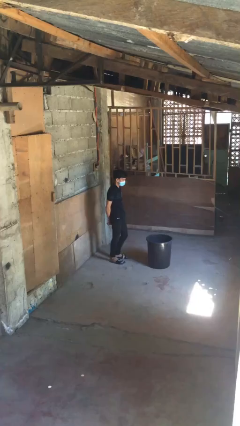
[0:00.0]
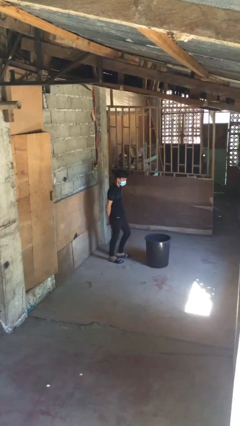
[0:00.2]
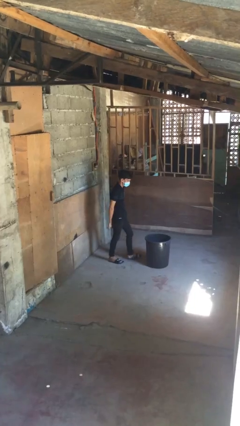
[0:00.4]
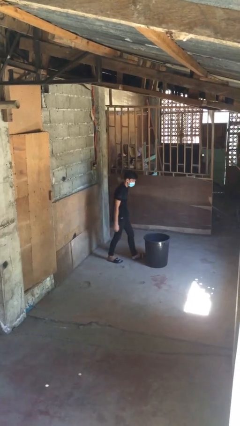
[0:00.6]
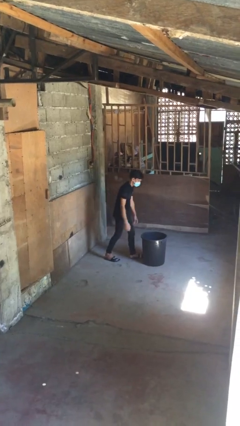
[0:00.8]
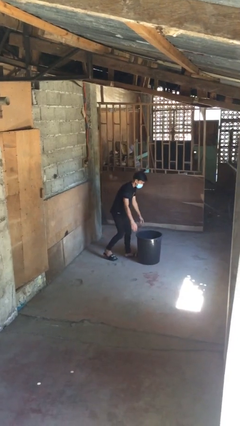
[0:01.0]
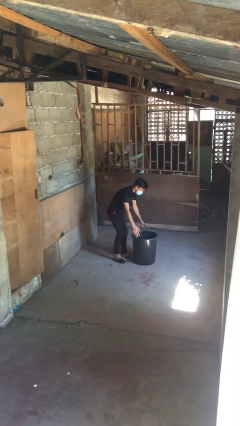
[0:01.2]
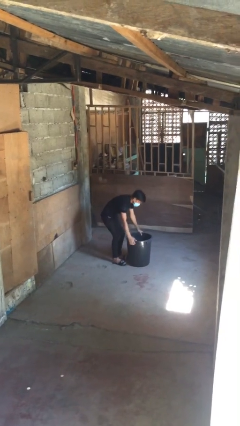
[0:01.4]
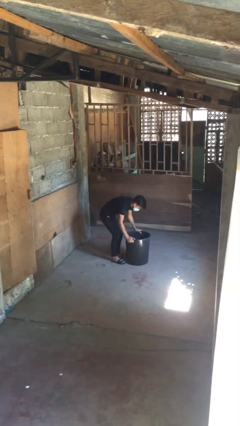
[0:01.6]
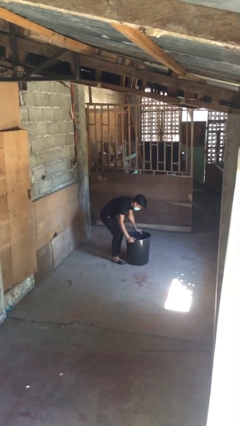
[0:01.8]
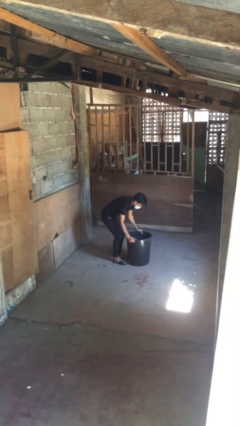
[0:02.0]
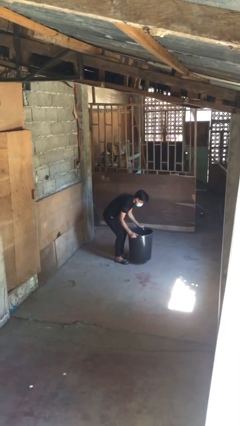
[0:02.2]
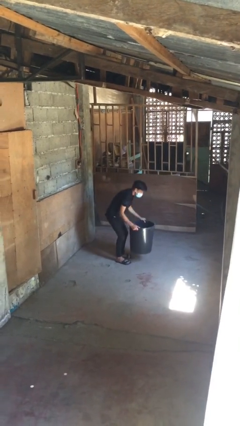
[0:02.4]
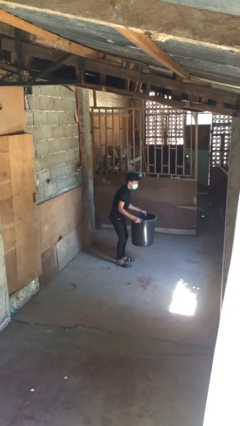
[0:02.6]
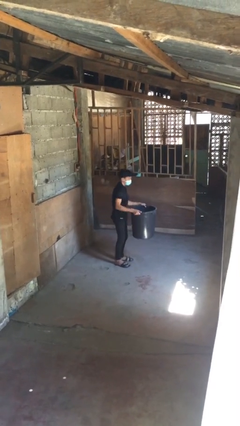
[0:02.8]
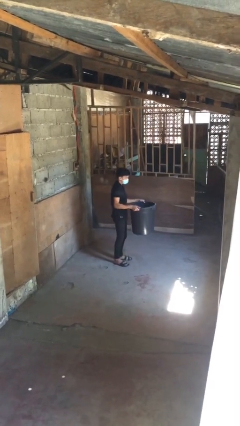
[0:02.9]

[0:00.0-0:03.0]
person picks up object from floor

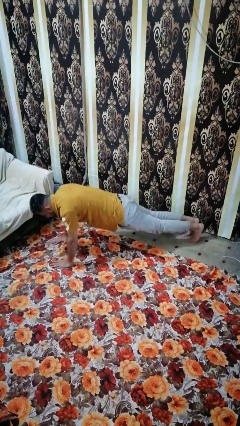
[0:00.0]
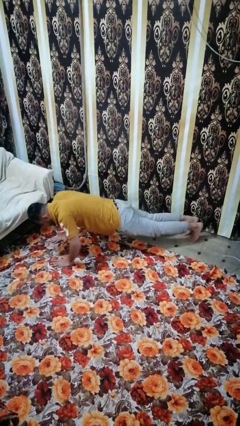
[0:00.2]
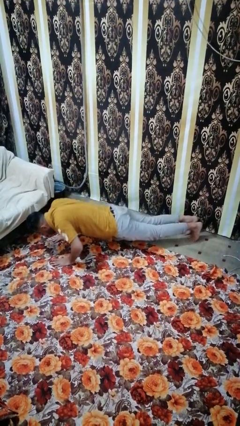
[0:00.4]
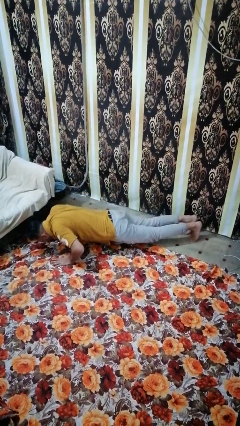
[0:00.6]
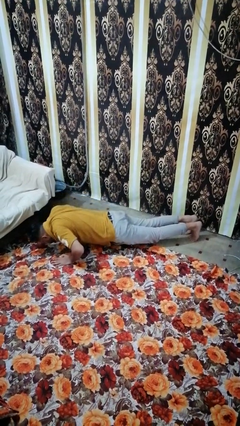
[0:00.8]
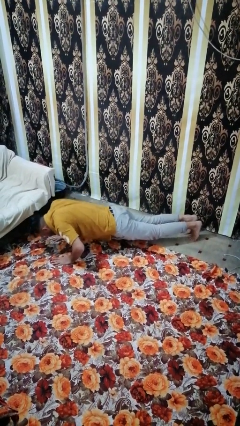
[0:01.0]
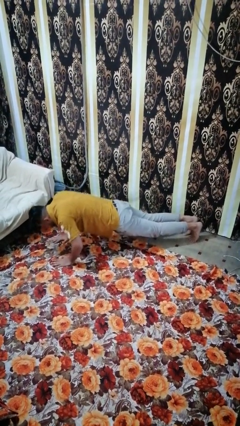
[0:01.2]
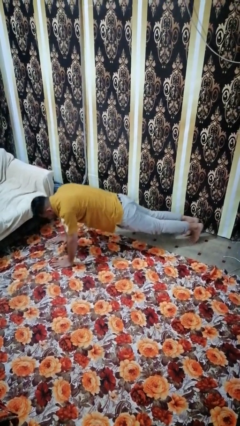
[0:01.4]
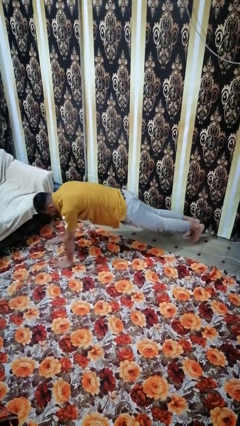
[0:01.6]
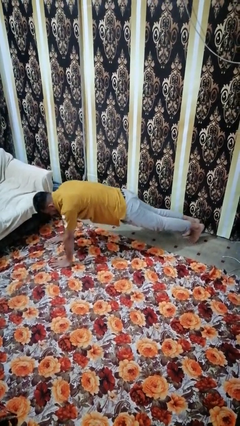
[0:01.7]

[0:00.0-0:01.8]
person exercises with pushup

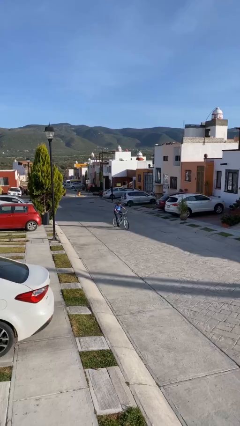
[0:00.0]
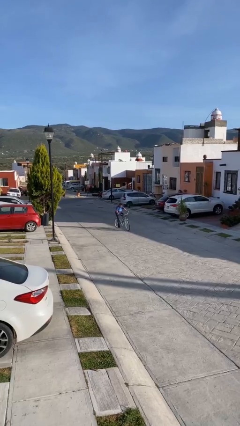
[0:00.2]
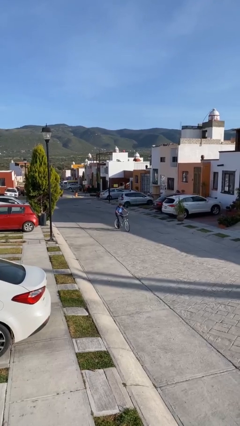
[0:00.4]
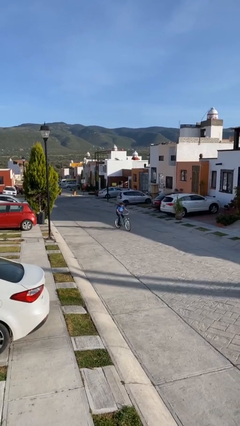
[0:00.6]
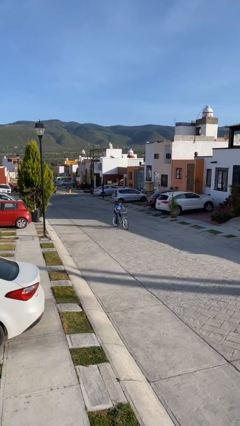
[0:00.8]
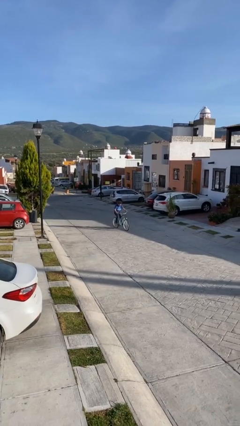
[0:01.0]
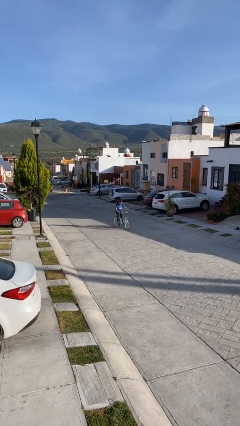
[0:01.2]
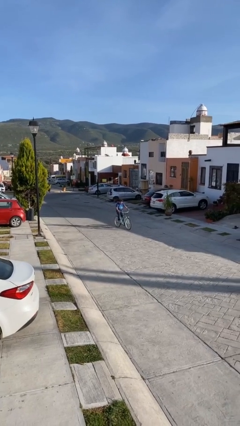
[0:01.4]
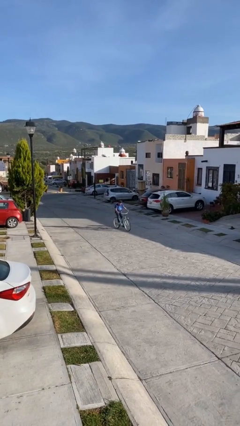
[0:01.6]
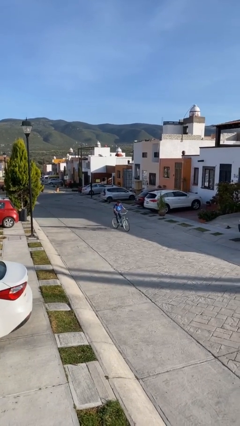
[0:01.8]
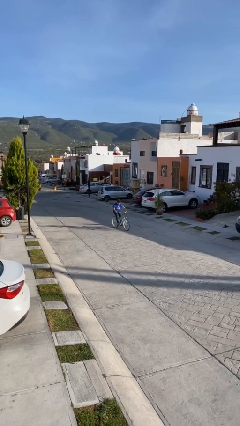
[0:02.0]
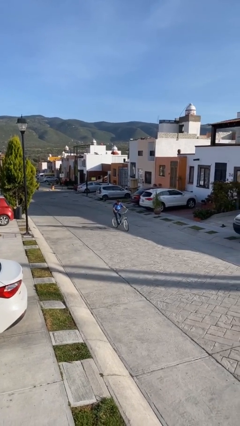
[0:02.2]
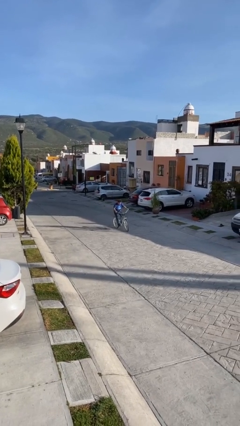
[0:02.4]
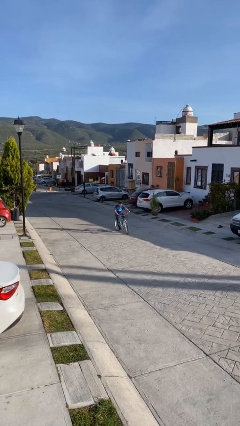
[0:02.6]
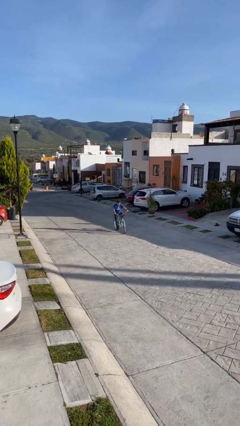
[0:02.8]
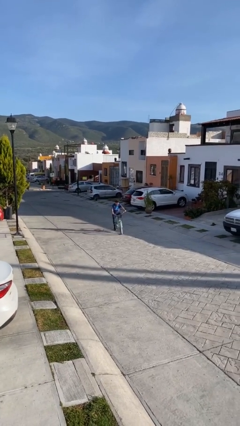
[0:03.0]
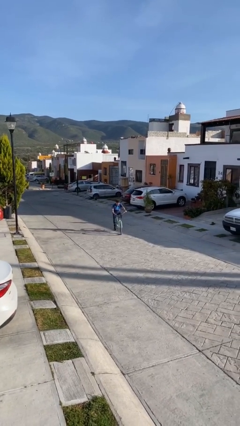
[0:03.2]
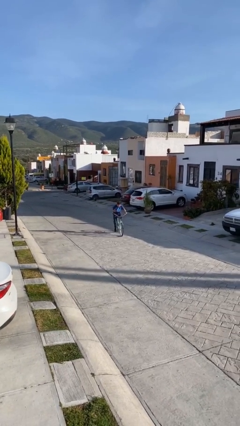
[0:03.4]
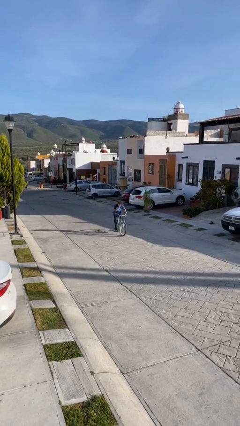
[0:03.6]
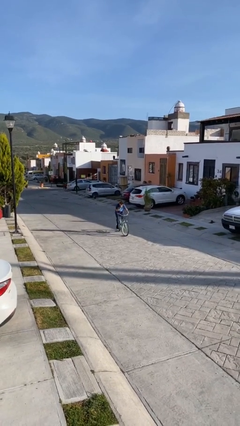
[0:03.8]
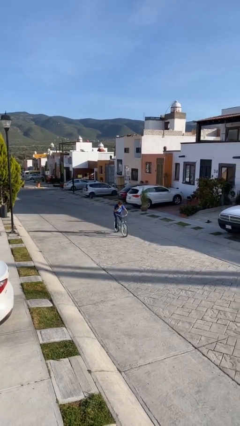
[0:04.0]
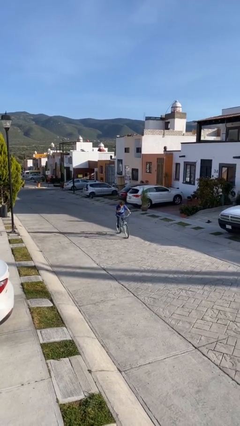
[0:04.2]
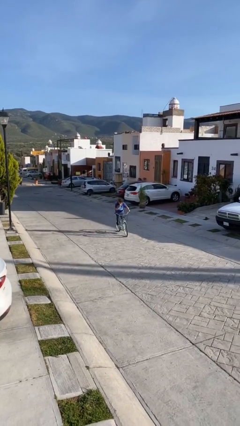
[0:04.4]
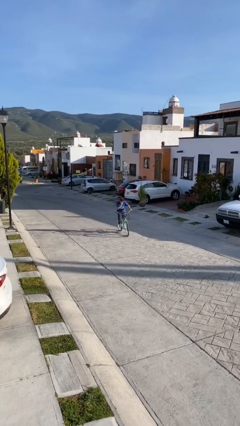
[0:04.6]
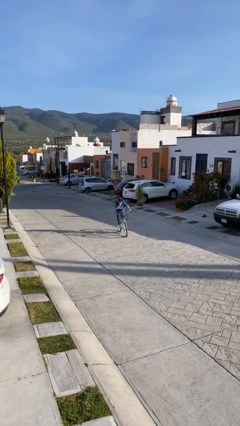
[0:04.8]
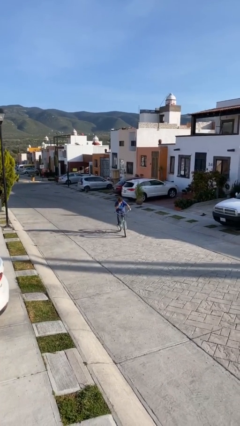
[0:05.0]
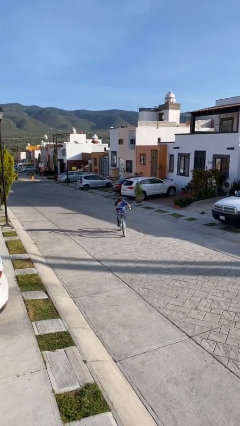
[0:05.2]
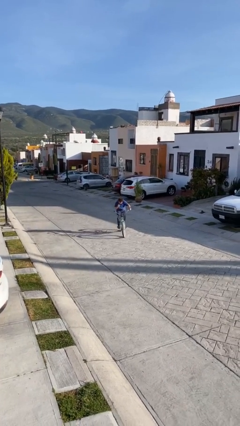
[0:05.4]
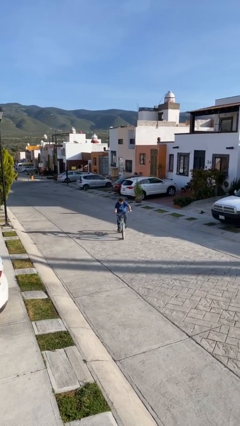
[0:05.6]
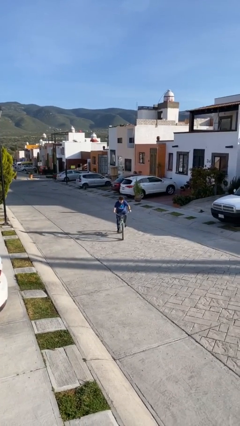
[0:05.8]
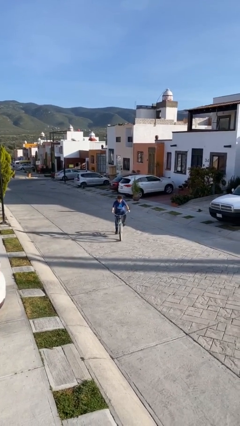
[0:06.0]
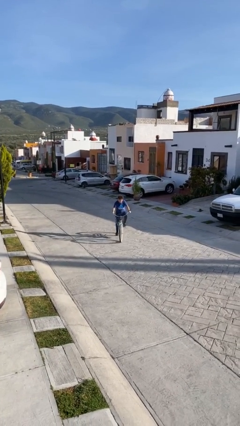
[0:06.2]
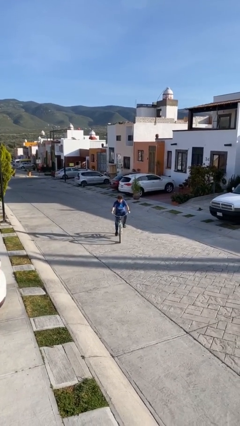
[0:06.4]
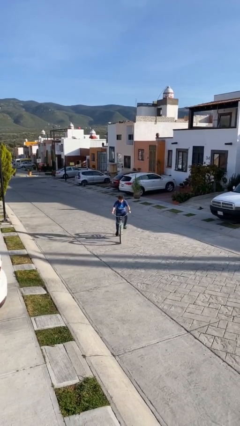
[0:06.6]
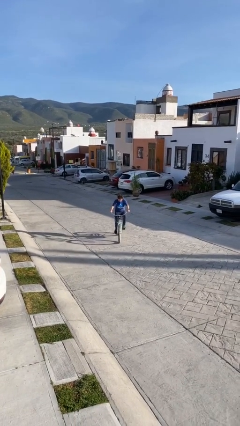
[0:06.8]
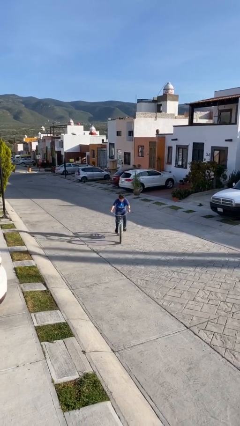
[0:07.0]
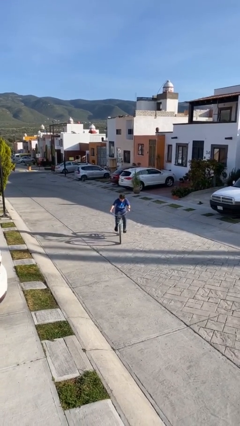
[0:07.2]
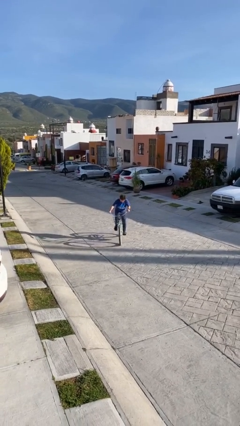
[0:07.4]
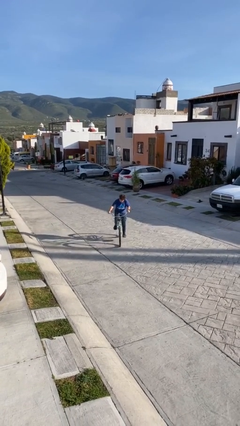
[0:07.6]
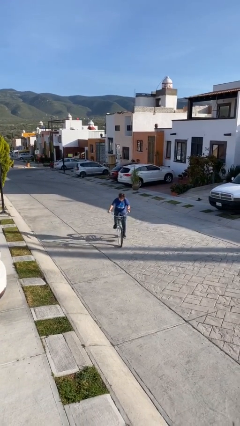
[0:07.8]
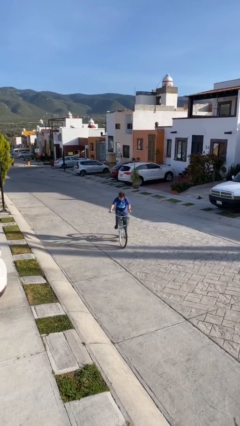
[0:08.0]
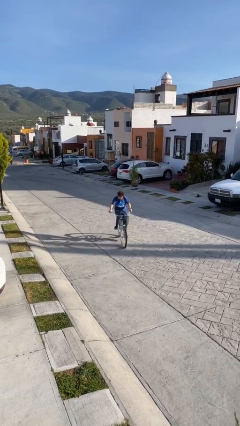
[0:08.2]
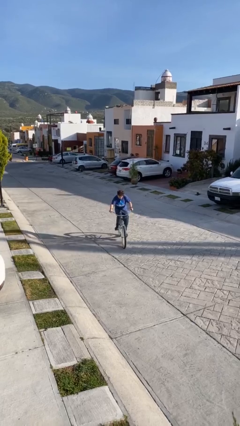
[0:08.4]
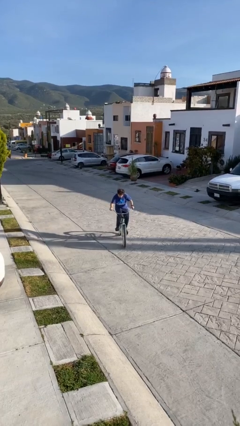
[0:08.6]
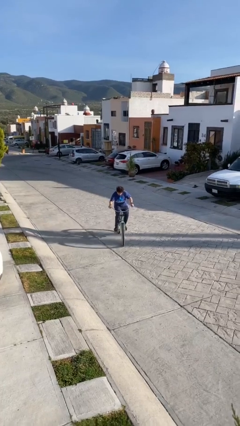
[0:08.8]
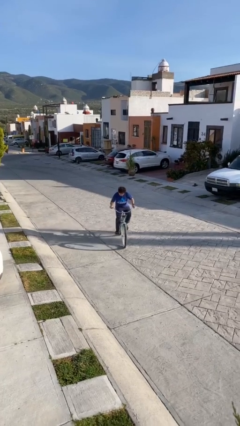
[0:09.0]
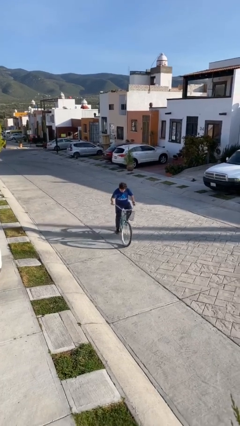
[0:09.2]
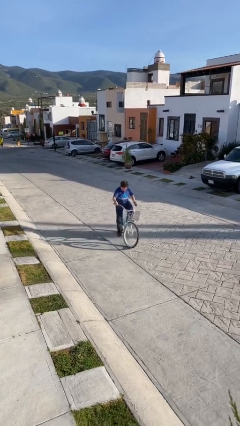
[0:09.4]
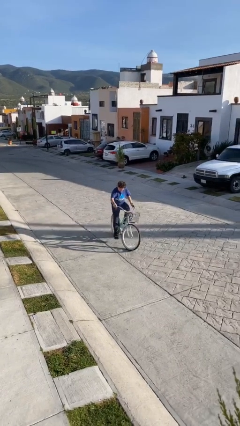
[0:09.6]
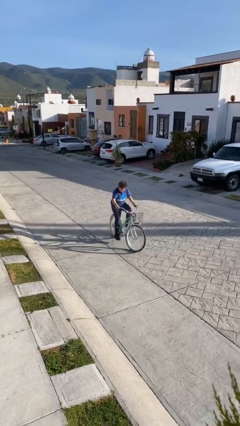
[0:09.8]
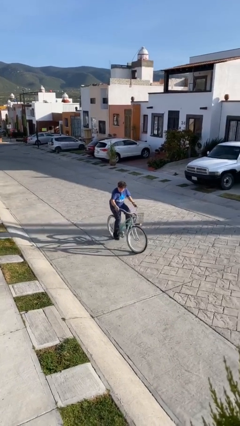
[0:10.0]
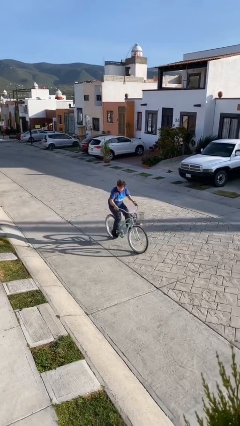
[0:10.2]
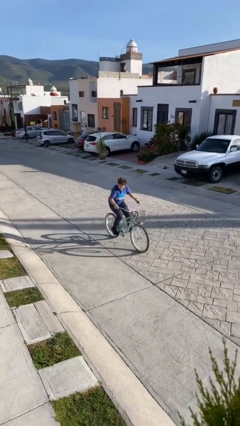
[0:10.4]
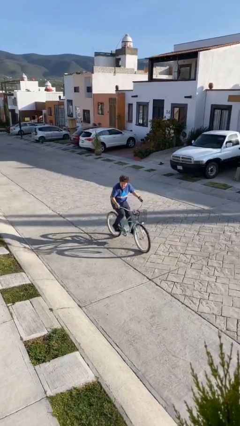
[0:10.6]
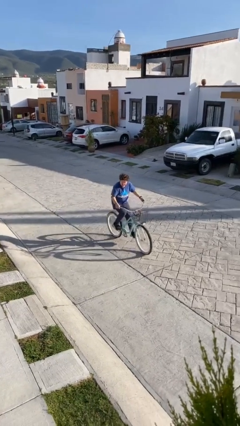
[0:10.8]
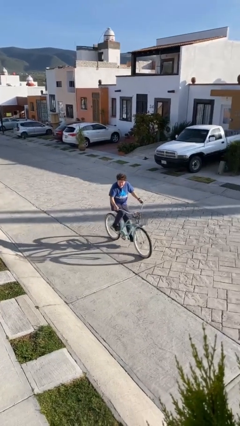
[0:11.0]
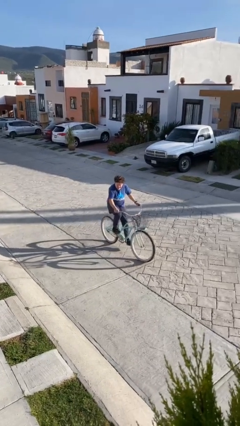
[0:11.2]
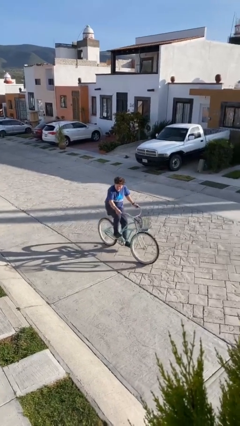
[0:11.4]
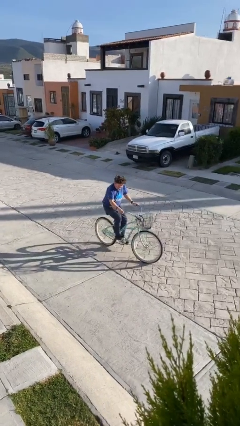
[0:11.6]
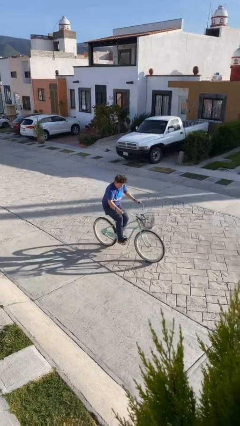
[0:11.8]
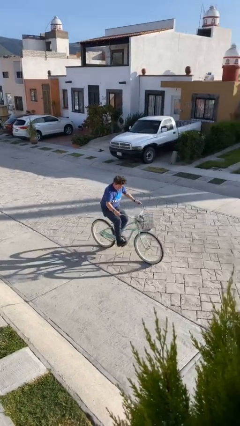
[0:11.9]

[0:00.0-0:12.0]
person rides bicycle

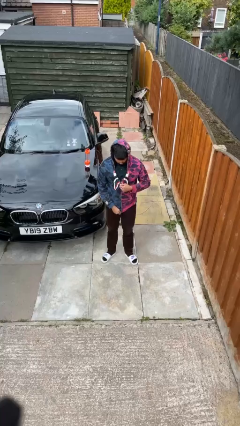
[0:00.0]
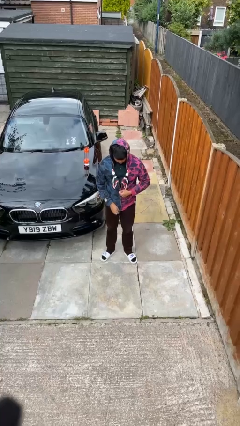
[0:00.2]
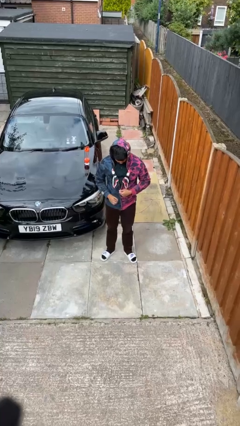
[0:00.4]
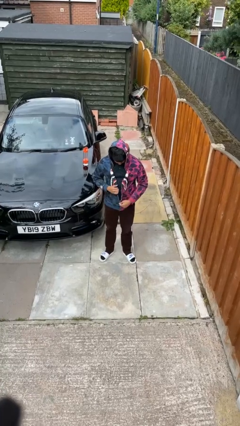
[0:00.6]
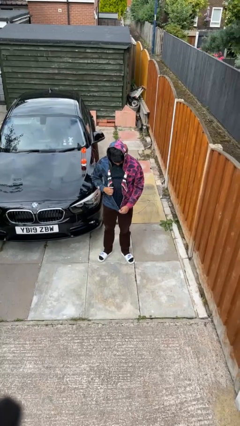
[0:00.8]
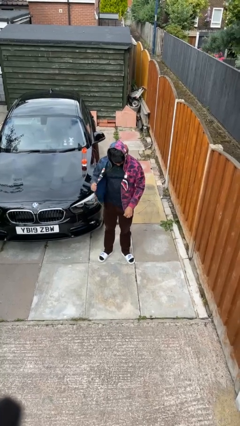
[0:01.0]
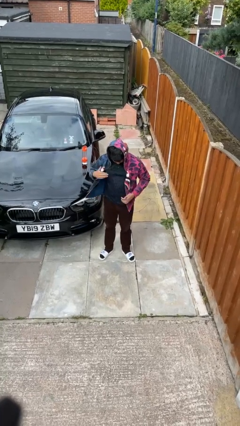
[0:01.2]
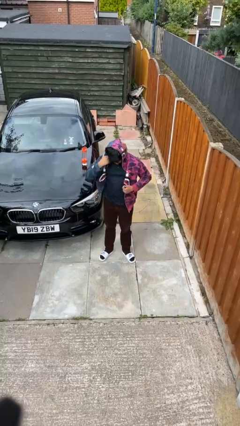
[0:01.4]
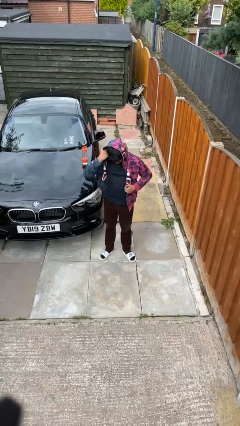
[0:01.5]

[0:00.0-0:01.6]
person unzips jacket
